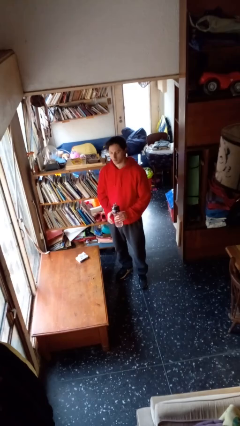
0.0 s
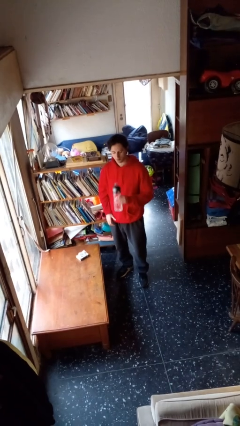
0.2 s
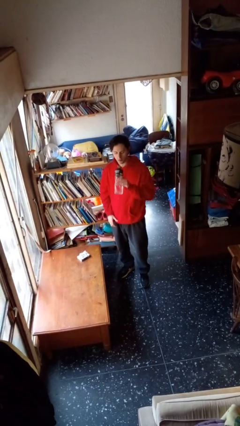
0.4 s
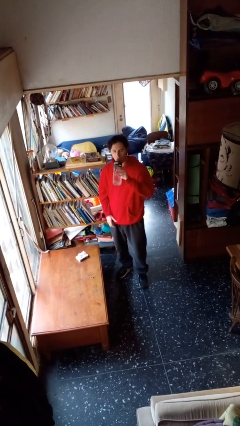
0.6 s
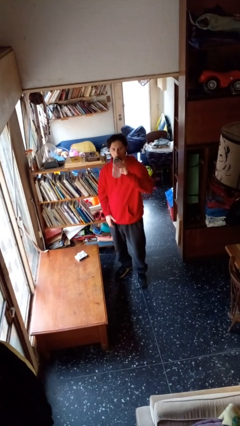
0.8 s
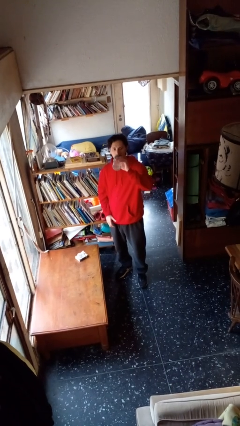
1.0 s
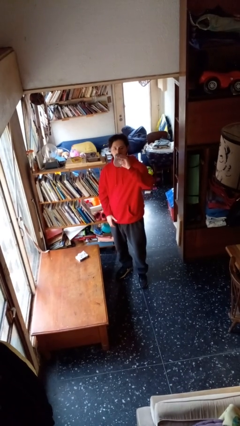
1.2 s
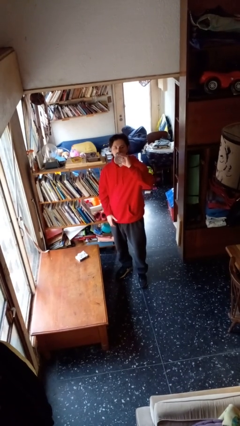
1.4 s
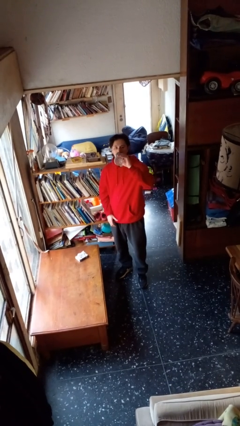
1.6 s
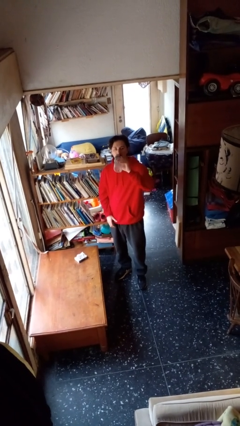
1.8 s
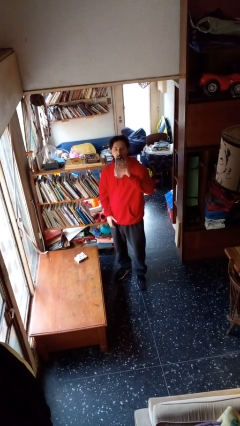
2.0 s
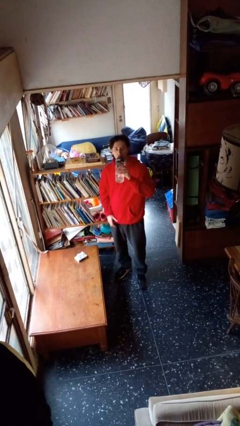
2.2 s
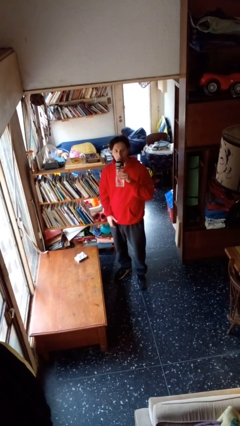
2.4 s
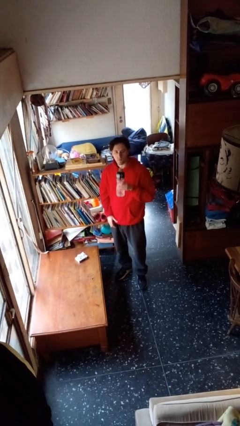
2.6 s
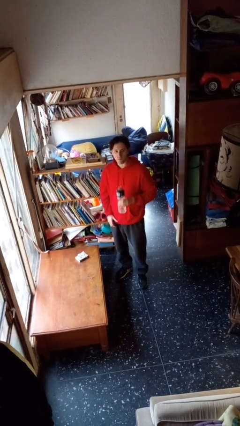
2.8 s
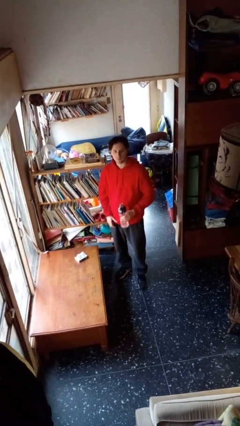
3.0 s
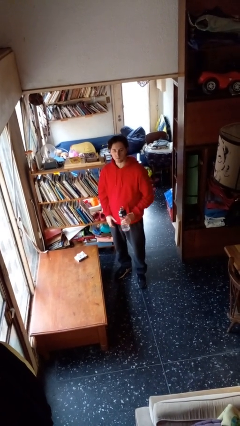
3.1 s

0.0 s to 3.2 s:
person drinks from bottle

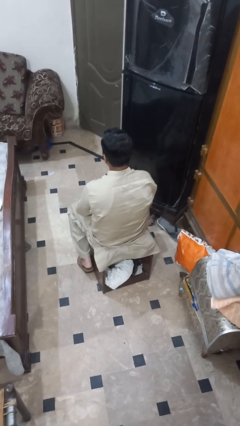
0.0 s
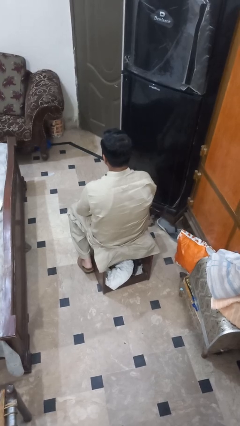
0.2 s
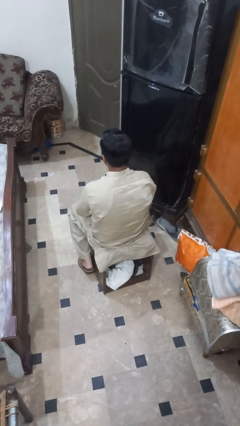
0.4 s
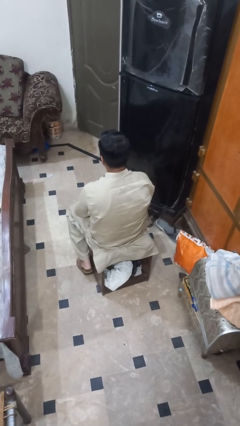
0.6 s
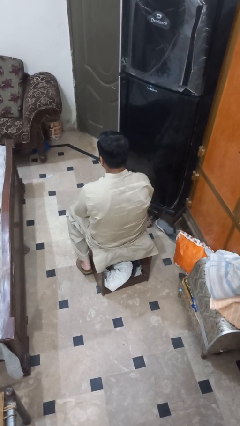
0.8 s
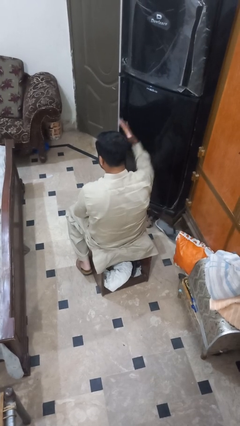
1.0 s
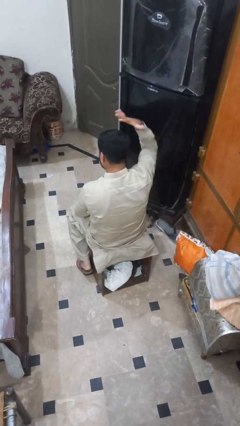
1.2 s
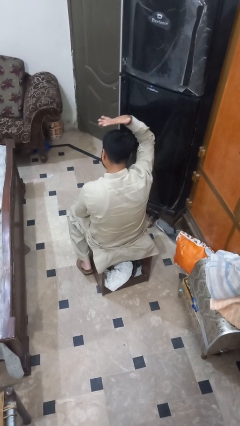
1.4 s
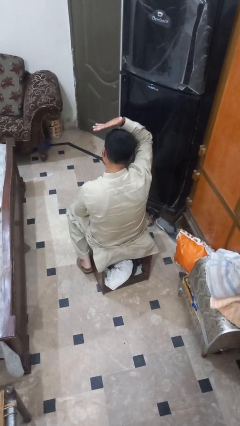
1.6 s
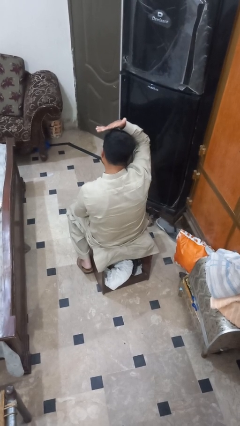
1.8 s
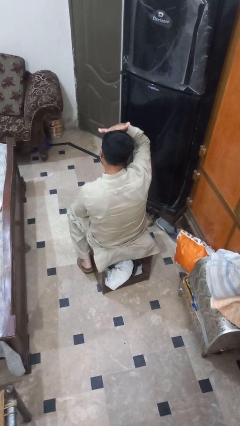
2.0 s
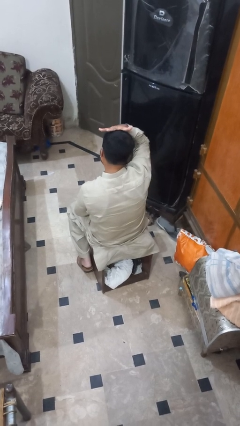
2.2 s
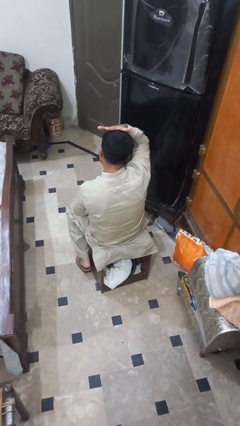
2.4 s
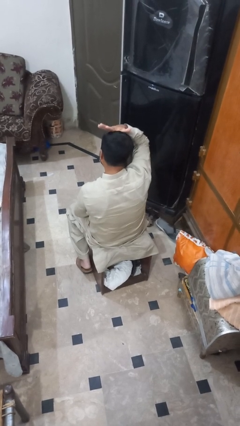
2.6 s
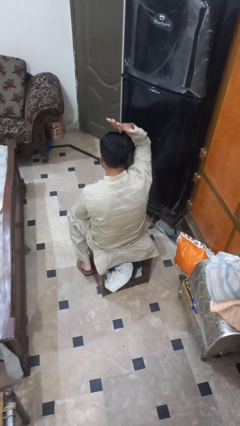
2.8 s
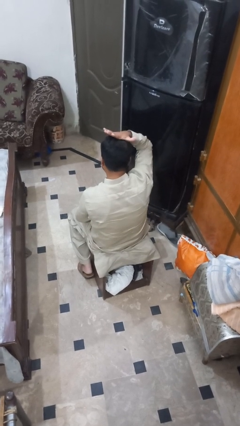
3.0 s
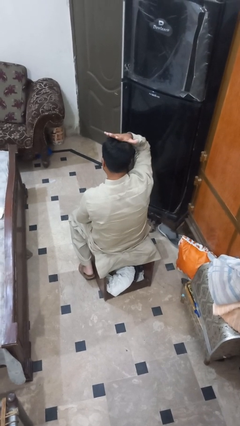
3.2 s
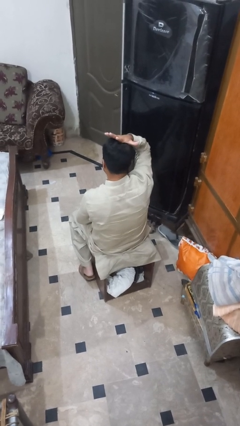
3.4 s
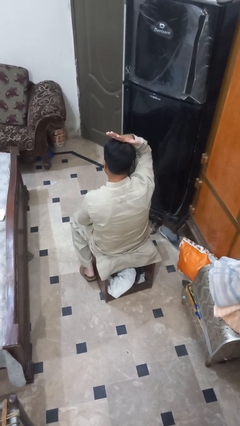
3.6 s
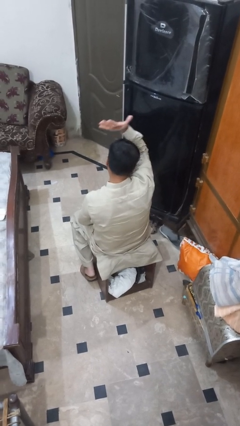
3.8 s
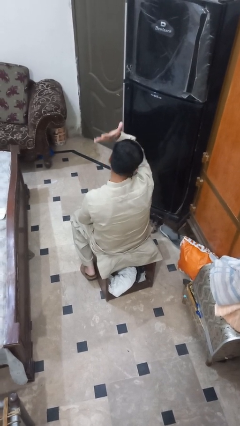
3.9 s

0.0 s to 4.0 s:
person pats head

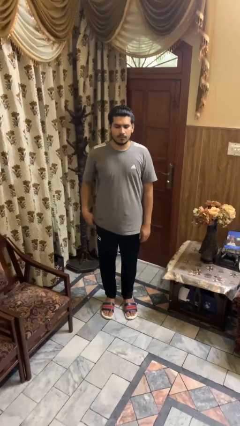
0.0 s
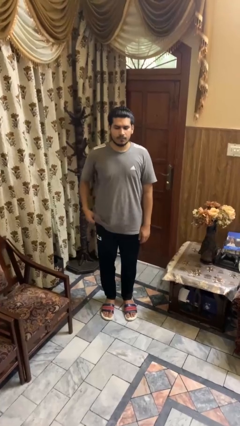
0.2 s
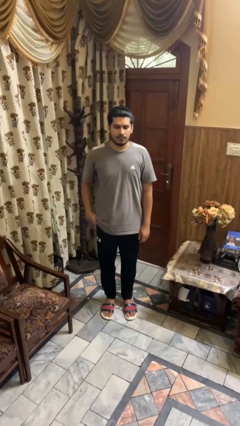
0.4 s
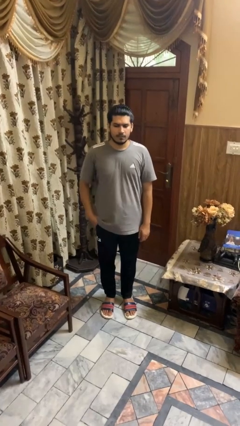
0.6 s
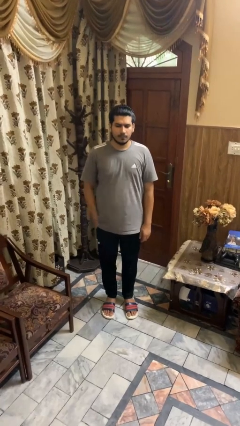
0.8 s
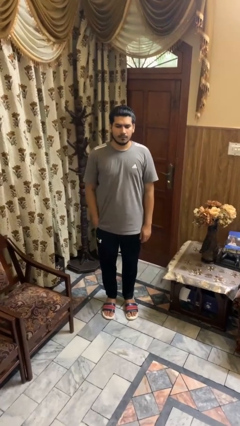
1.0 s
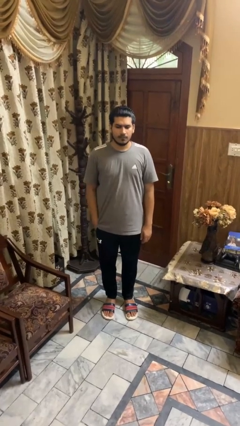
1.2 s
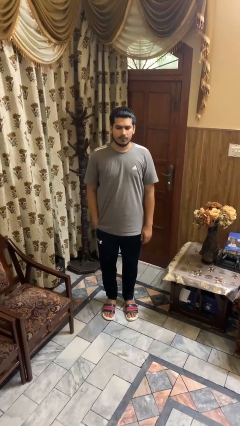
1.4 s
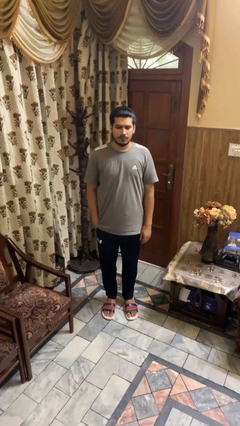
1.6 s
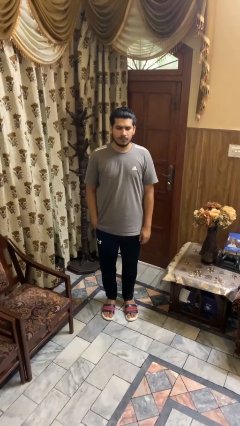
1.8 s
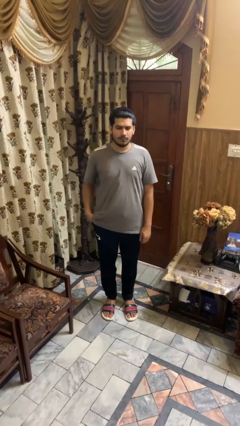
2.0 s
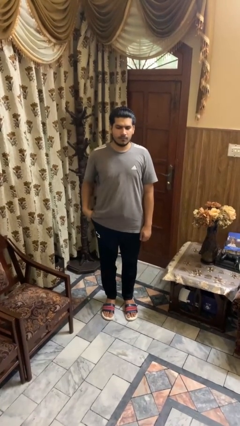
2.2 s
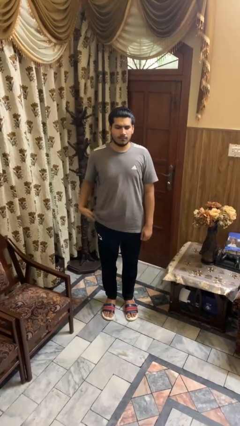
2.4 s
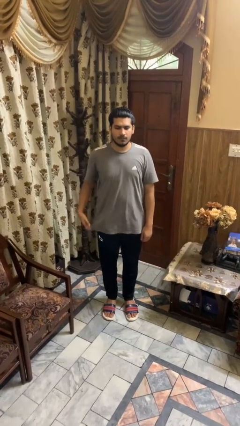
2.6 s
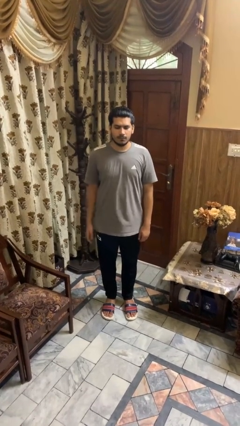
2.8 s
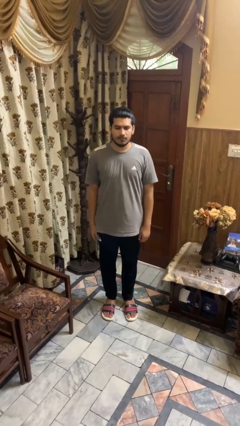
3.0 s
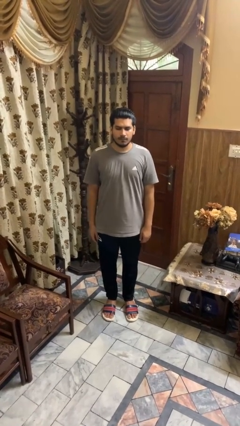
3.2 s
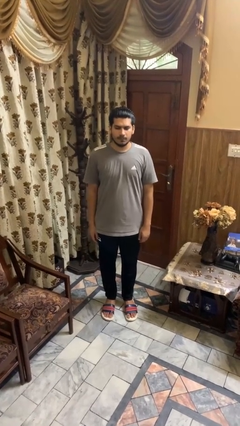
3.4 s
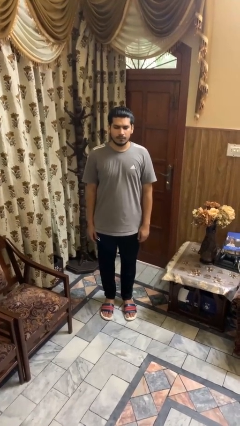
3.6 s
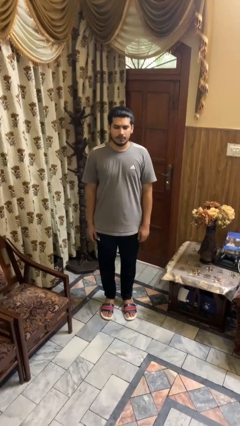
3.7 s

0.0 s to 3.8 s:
person puts hands in back pockets

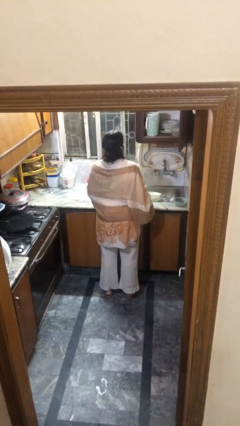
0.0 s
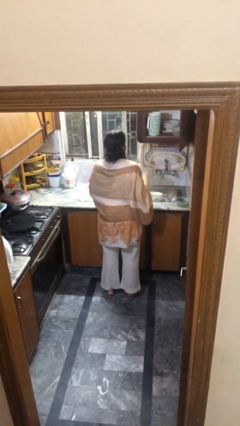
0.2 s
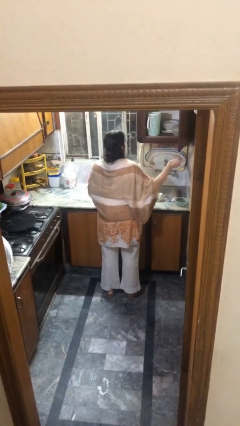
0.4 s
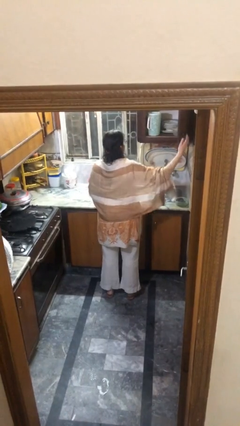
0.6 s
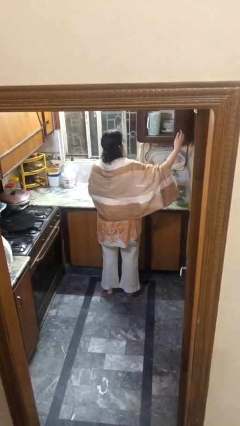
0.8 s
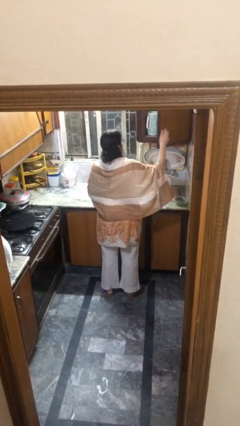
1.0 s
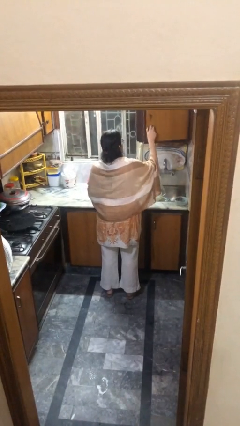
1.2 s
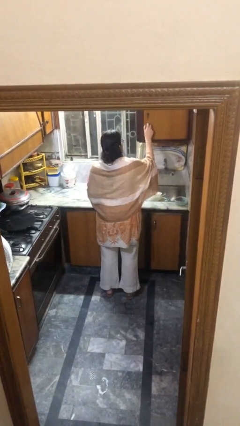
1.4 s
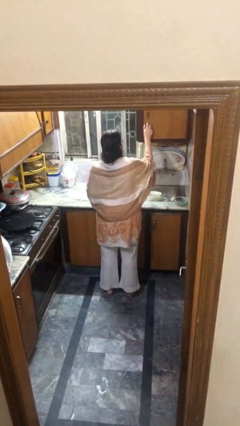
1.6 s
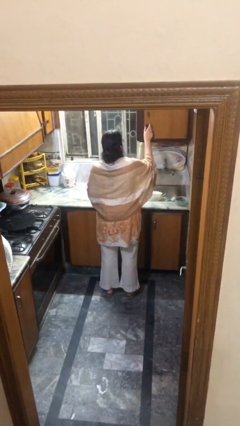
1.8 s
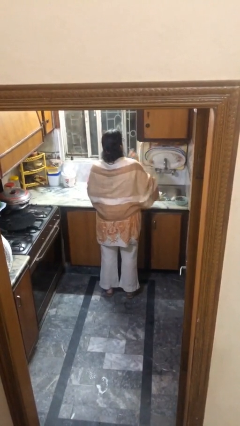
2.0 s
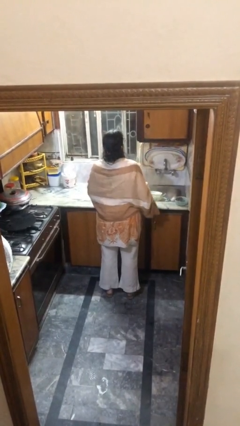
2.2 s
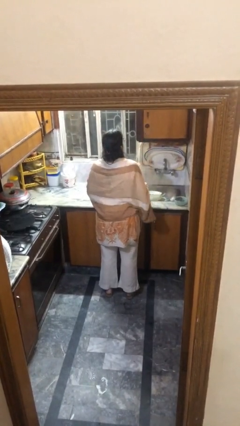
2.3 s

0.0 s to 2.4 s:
person closes kitchen drawer

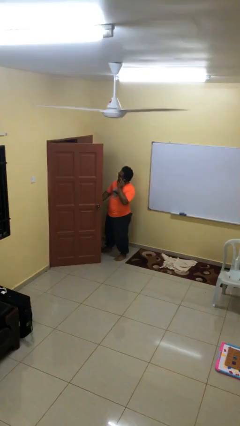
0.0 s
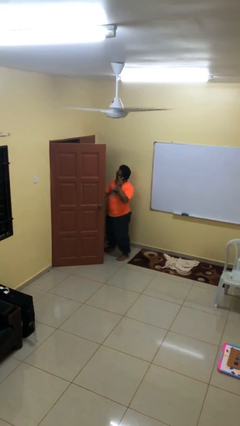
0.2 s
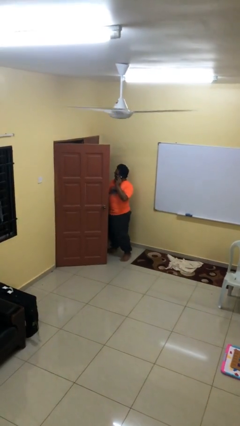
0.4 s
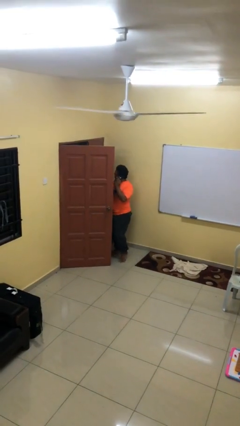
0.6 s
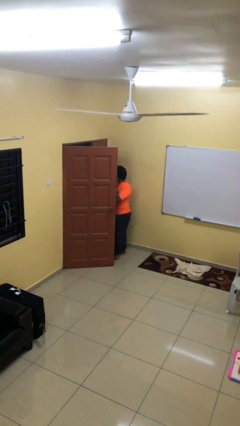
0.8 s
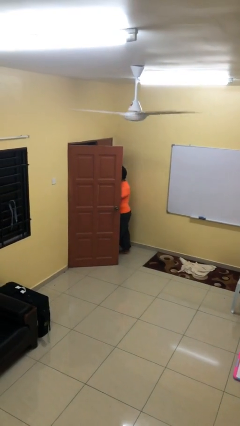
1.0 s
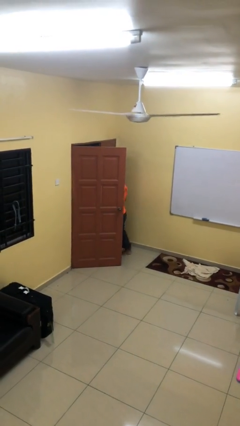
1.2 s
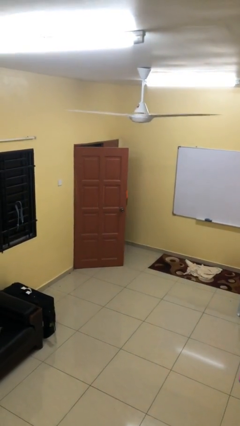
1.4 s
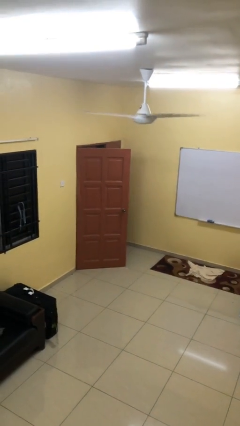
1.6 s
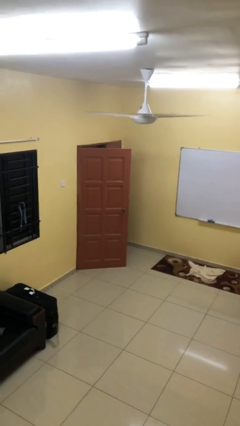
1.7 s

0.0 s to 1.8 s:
person exits scene through structure

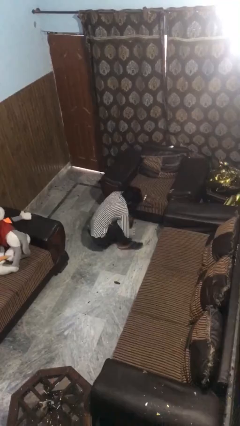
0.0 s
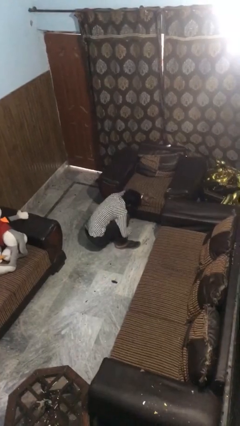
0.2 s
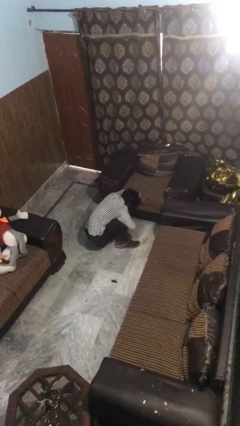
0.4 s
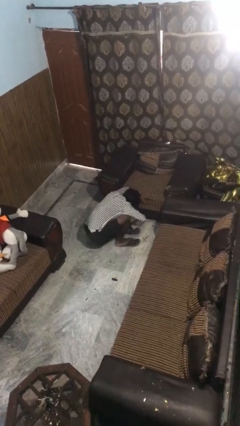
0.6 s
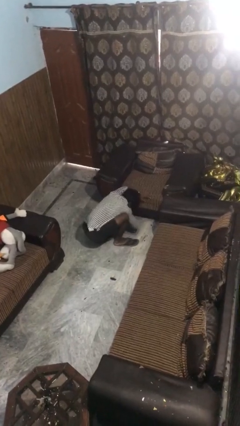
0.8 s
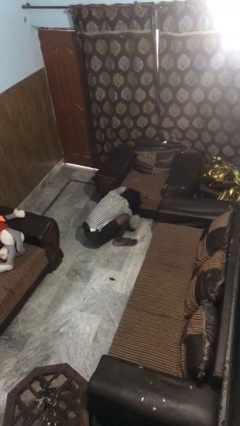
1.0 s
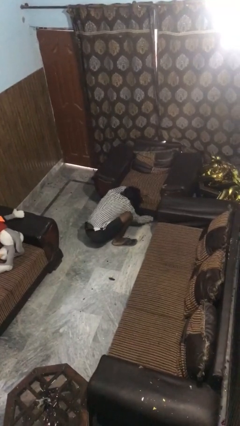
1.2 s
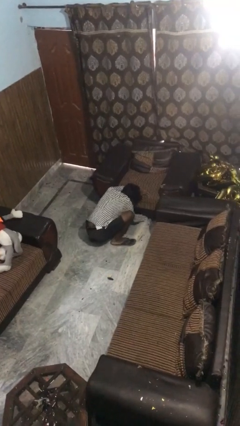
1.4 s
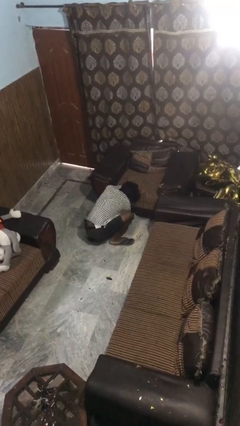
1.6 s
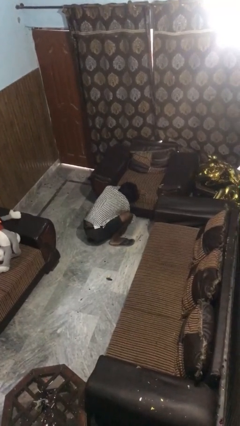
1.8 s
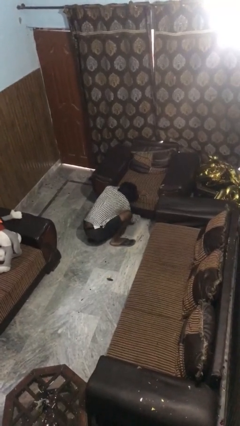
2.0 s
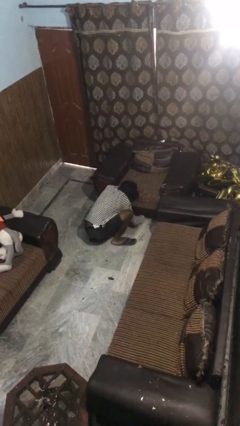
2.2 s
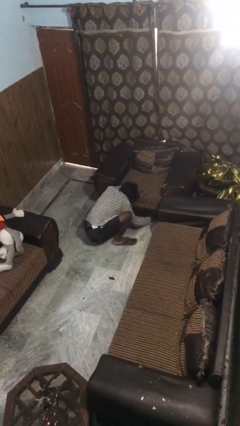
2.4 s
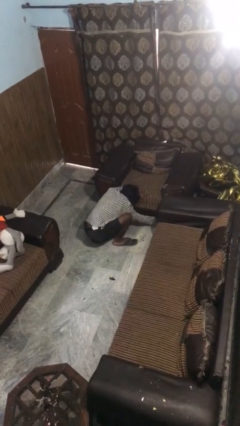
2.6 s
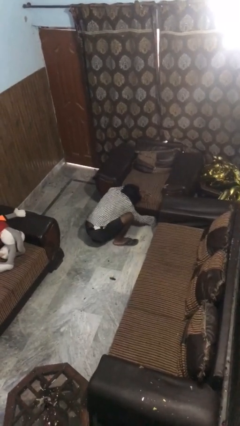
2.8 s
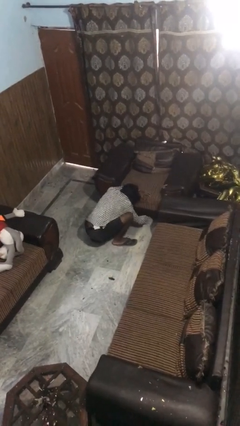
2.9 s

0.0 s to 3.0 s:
person searches under couch
